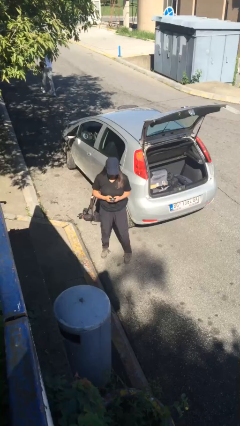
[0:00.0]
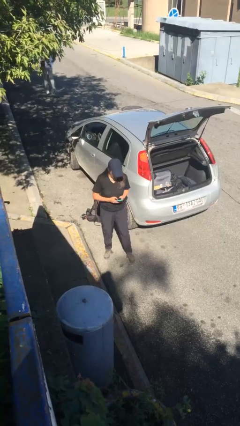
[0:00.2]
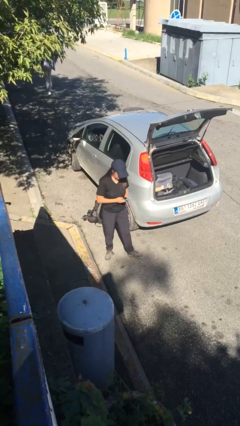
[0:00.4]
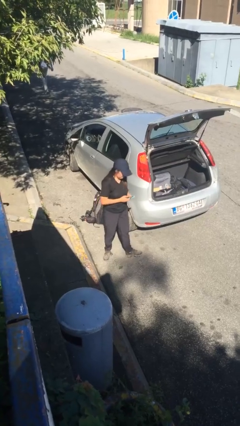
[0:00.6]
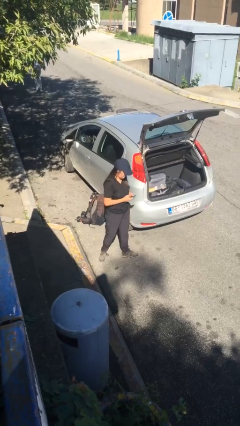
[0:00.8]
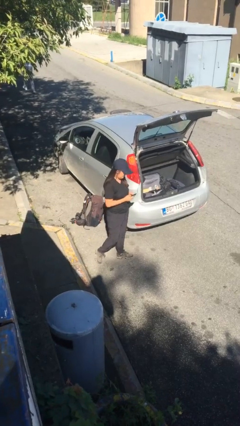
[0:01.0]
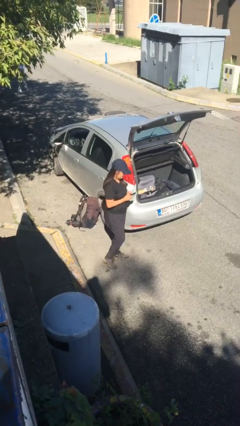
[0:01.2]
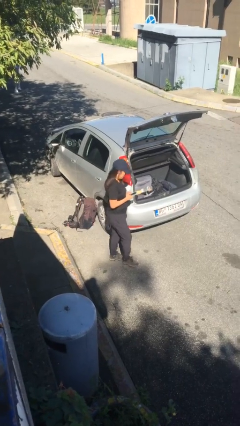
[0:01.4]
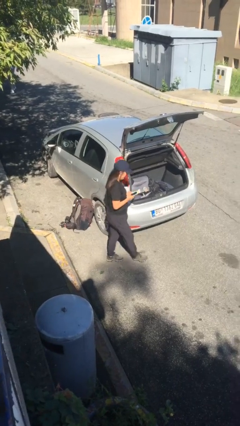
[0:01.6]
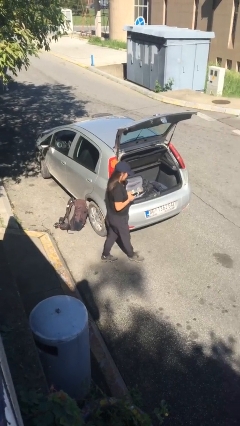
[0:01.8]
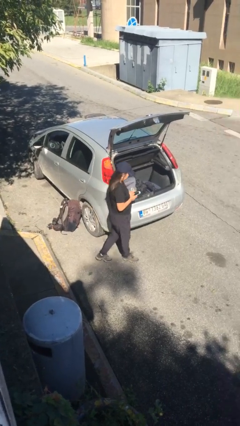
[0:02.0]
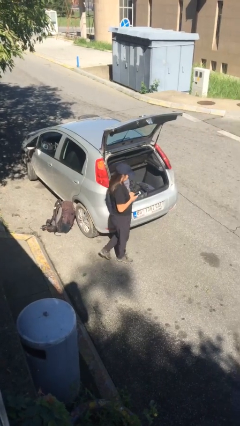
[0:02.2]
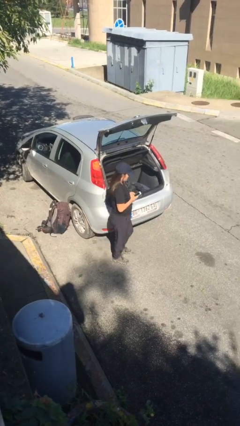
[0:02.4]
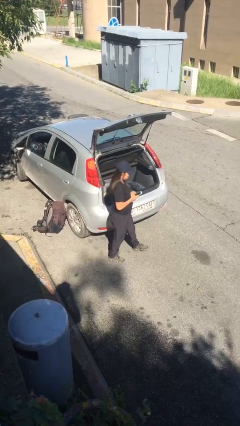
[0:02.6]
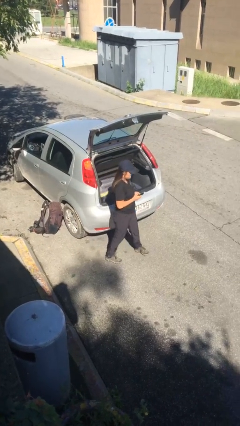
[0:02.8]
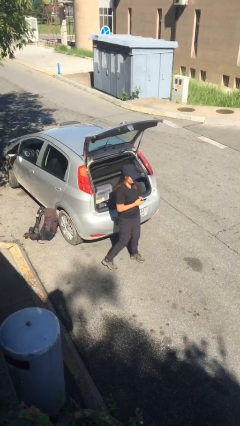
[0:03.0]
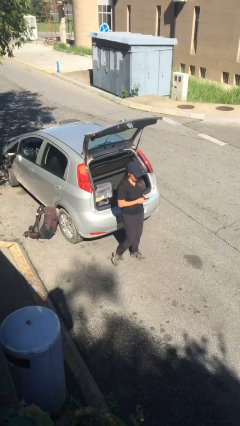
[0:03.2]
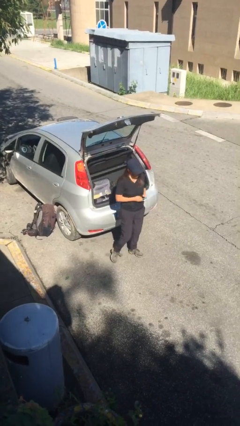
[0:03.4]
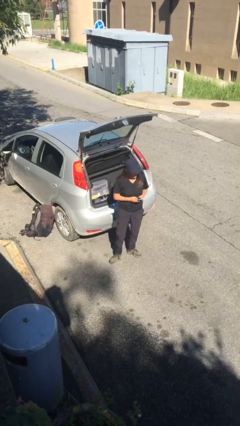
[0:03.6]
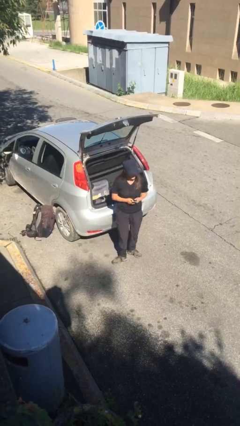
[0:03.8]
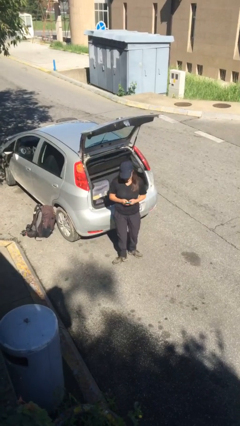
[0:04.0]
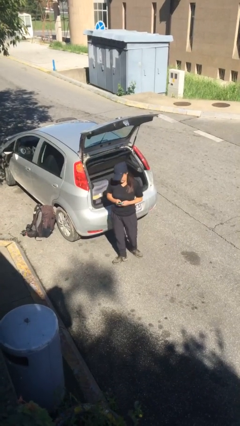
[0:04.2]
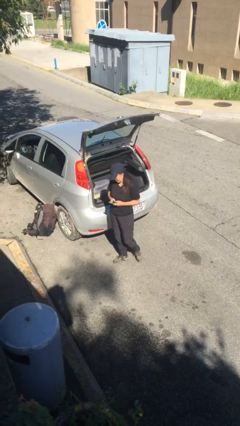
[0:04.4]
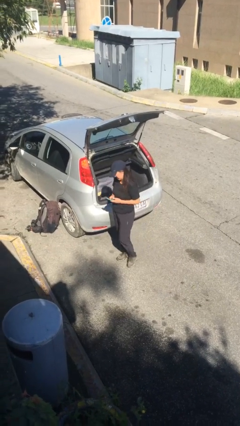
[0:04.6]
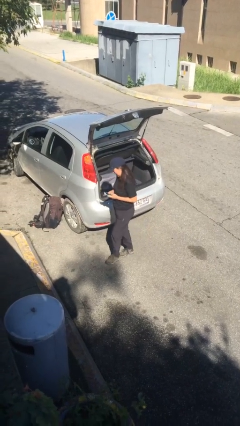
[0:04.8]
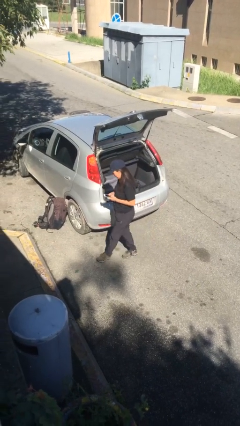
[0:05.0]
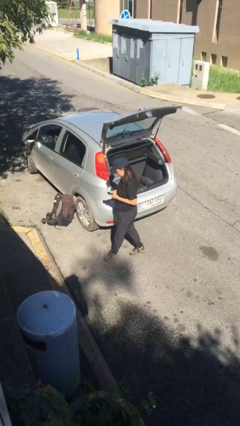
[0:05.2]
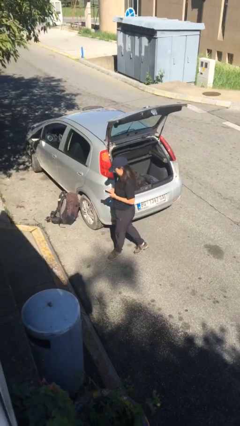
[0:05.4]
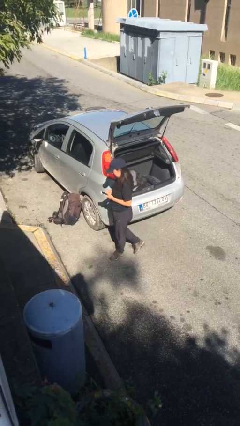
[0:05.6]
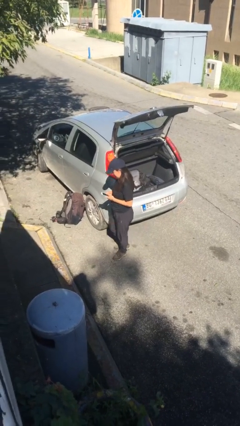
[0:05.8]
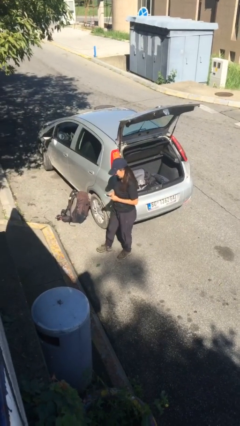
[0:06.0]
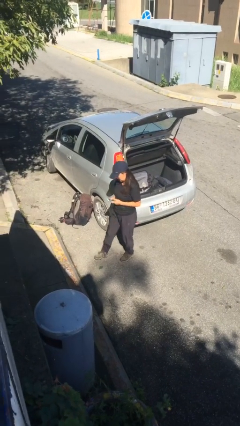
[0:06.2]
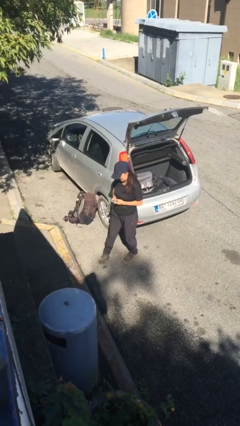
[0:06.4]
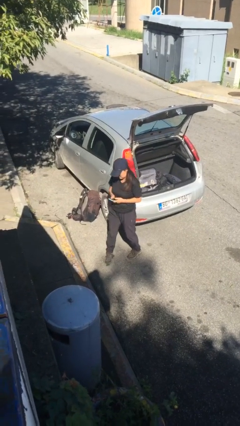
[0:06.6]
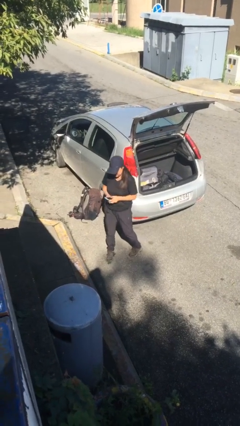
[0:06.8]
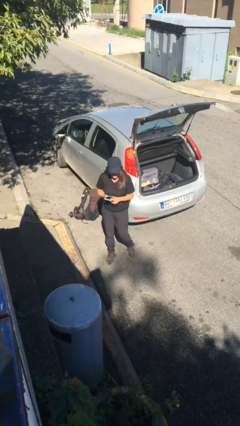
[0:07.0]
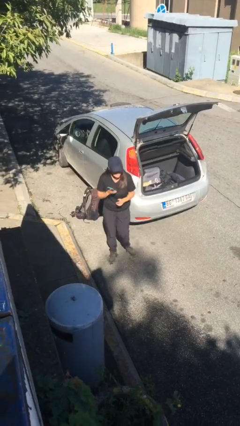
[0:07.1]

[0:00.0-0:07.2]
person texts on phone

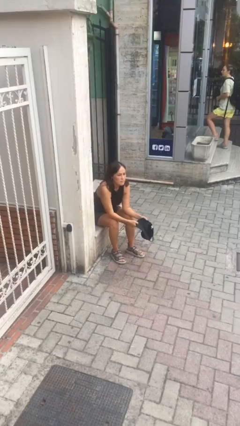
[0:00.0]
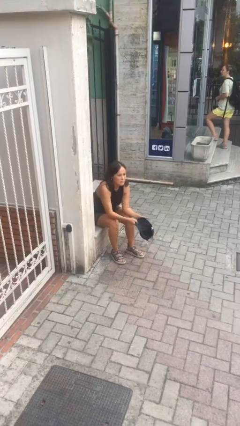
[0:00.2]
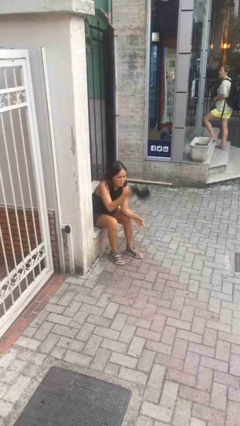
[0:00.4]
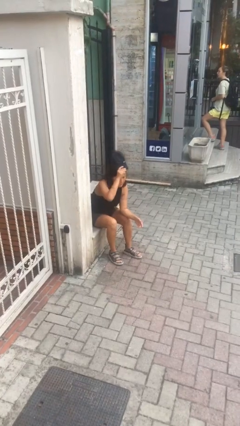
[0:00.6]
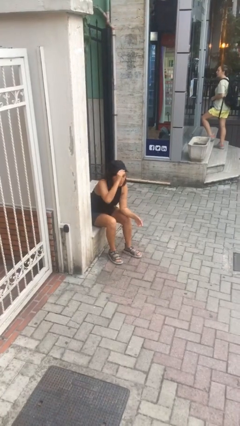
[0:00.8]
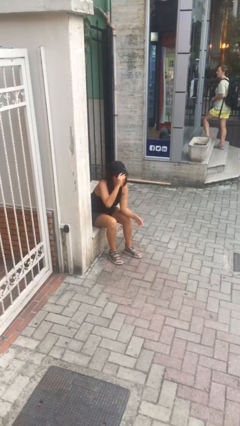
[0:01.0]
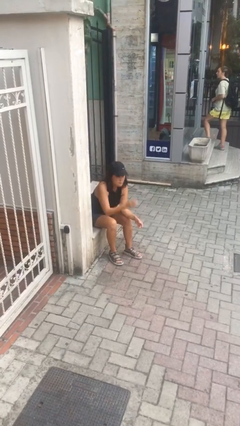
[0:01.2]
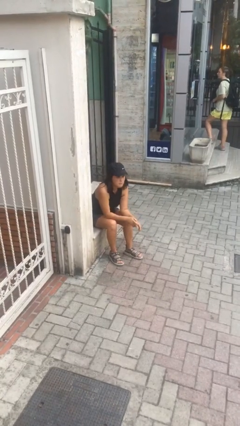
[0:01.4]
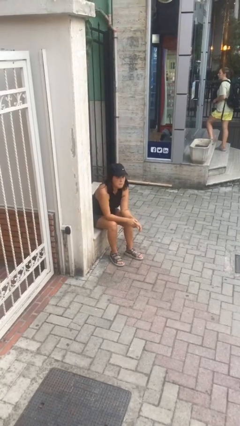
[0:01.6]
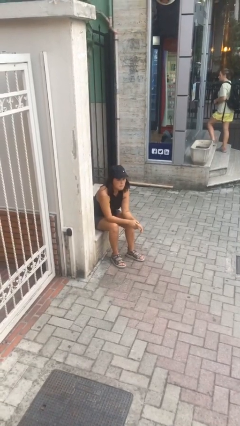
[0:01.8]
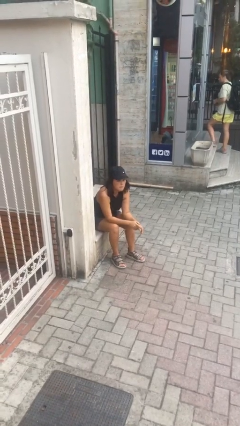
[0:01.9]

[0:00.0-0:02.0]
person puts on hat

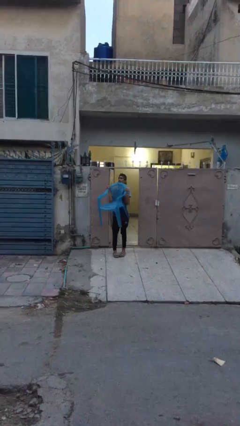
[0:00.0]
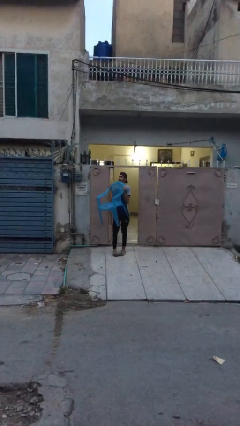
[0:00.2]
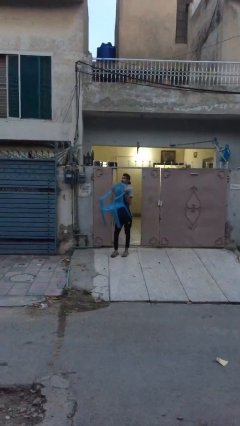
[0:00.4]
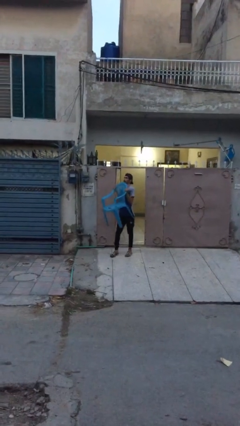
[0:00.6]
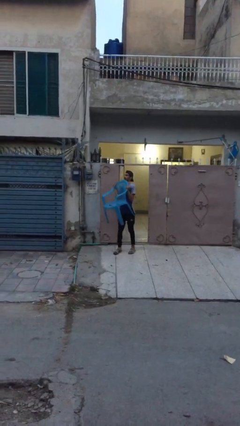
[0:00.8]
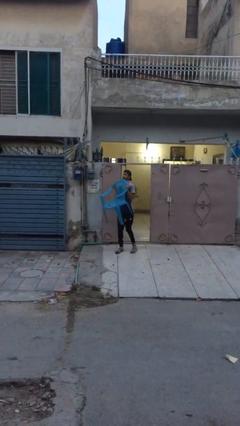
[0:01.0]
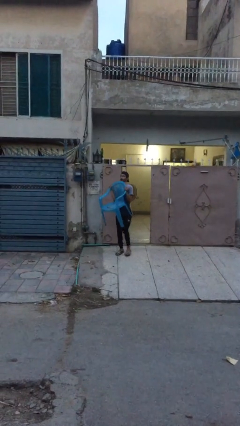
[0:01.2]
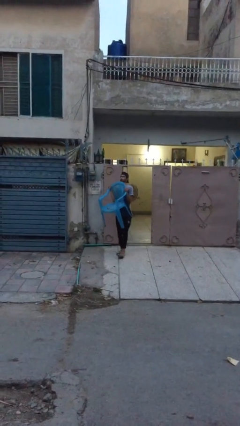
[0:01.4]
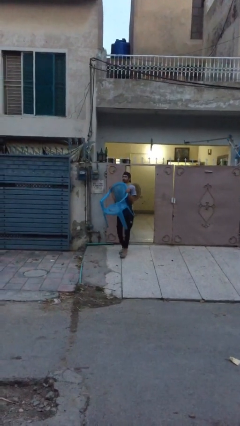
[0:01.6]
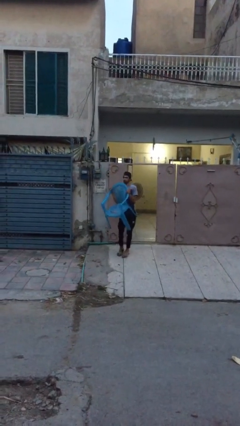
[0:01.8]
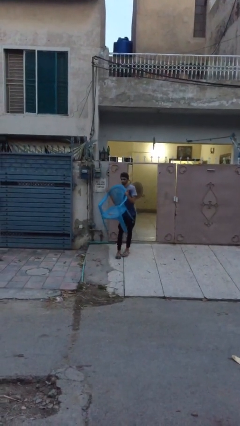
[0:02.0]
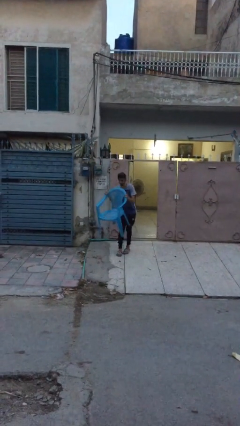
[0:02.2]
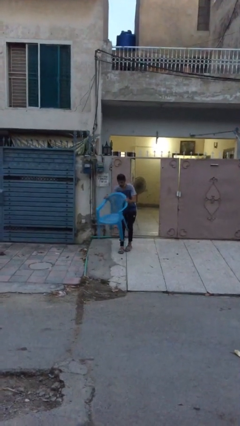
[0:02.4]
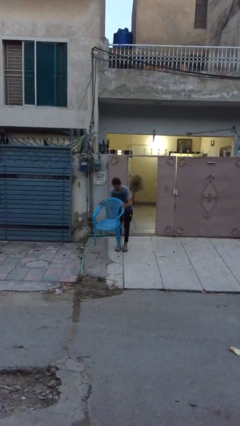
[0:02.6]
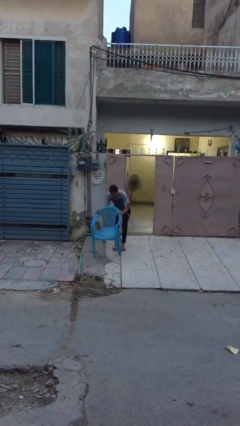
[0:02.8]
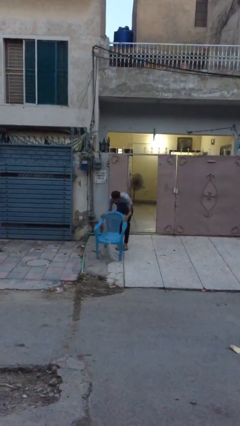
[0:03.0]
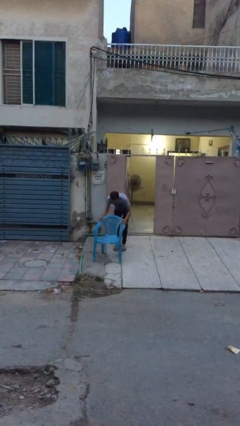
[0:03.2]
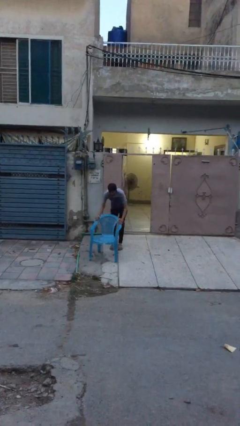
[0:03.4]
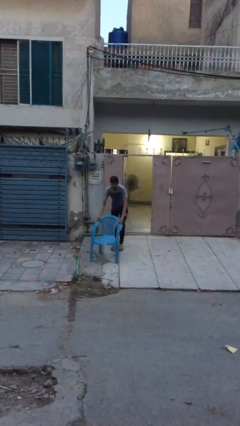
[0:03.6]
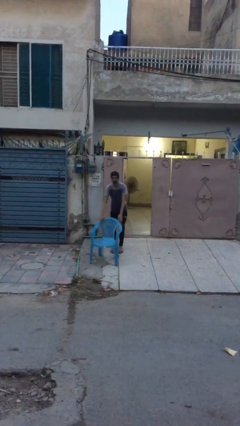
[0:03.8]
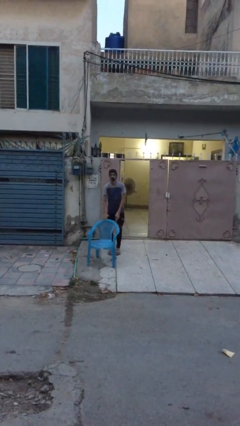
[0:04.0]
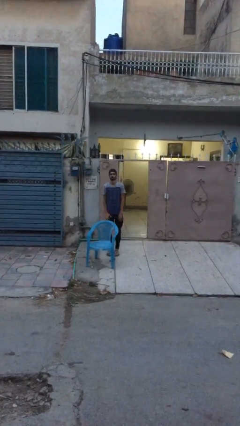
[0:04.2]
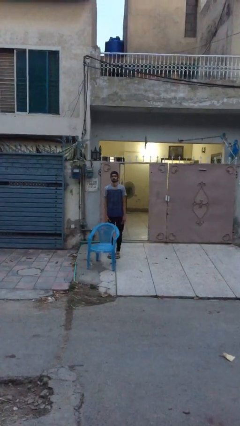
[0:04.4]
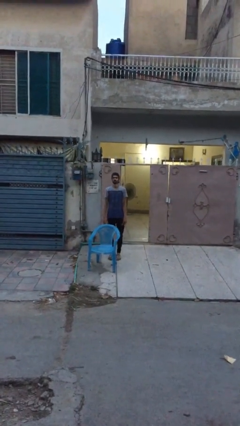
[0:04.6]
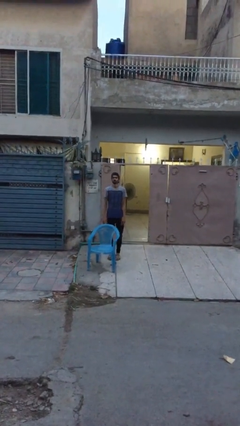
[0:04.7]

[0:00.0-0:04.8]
person puts down object on floor

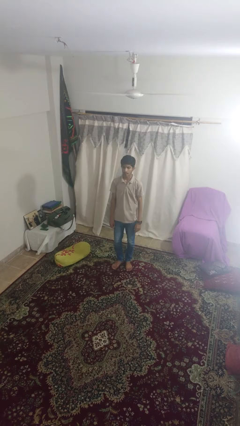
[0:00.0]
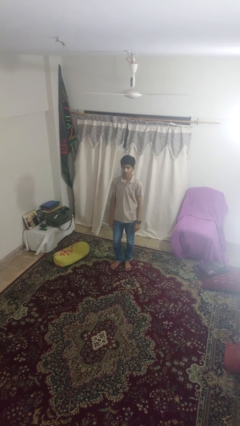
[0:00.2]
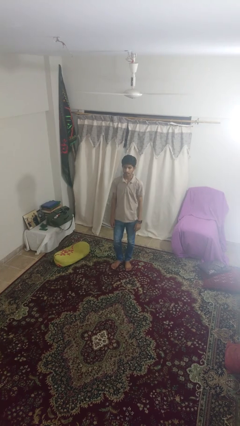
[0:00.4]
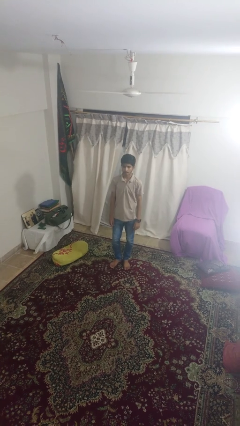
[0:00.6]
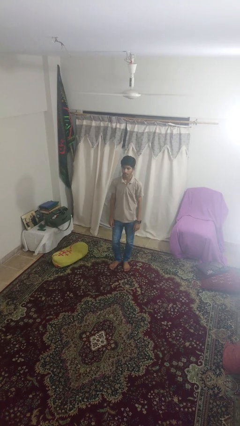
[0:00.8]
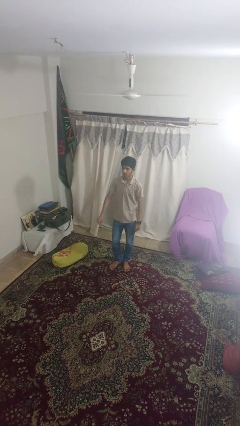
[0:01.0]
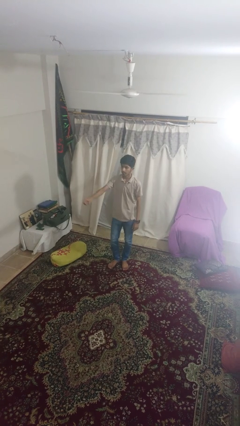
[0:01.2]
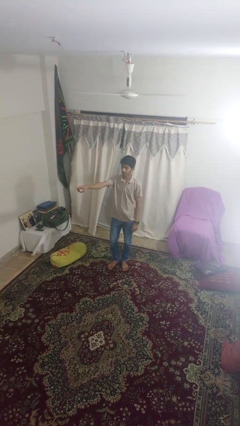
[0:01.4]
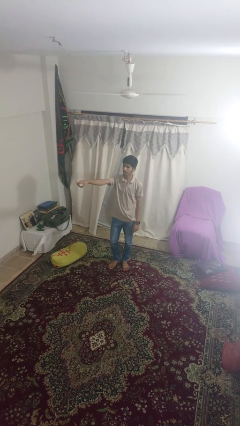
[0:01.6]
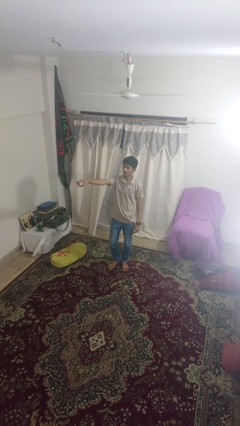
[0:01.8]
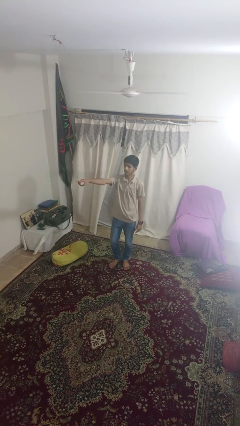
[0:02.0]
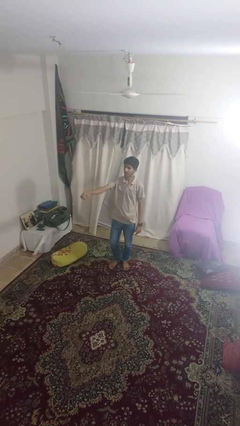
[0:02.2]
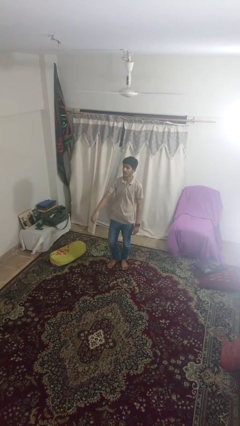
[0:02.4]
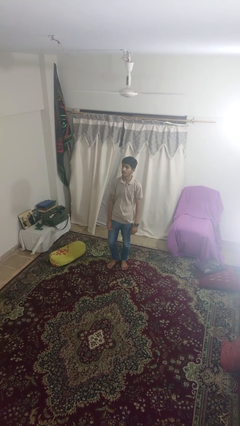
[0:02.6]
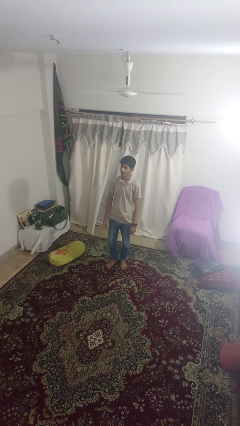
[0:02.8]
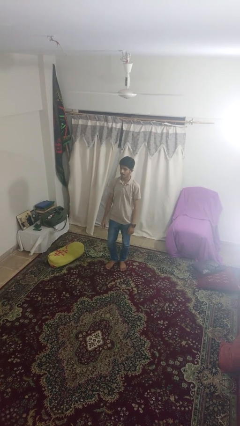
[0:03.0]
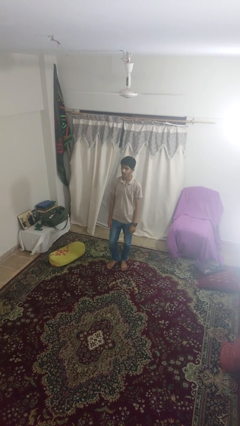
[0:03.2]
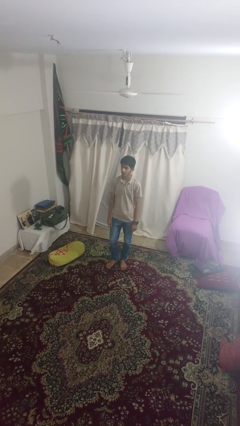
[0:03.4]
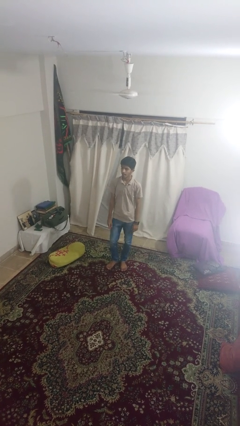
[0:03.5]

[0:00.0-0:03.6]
person points at person

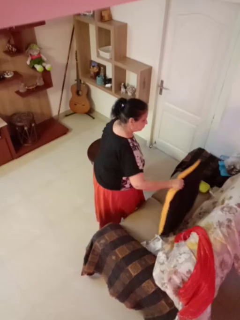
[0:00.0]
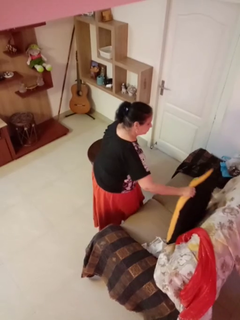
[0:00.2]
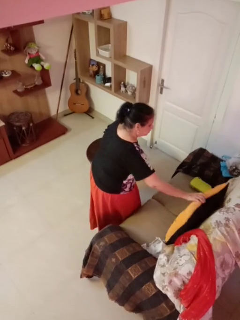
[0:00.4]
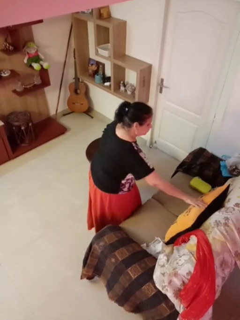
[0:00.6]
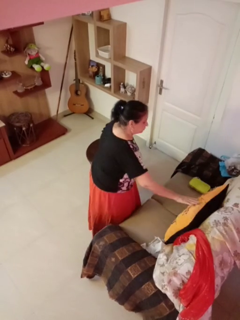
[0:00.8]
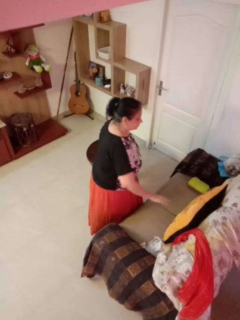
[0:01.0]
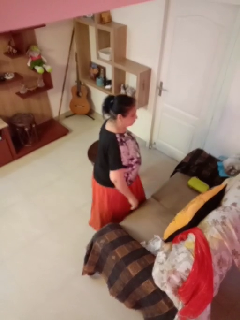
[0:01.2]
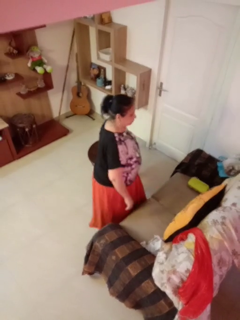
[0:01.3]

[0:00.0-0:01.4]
person puts down object on couch
